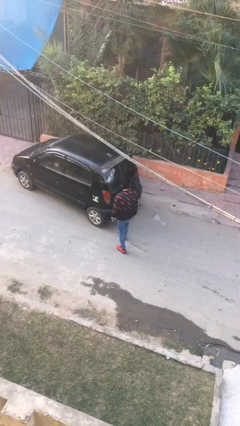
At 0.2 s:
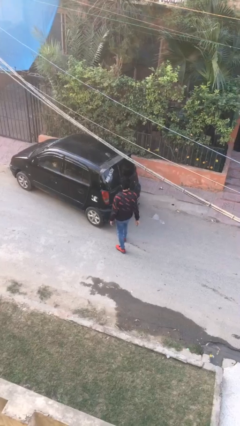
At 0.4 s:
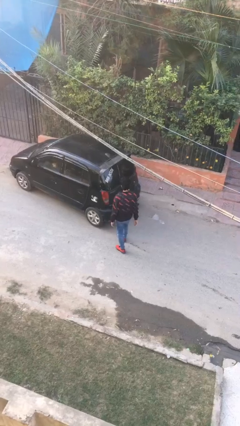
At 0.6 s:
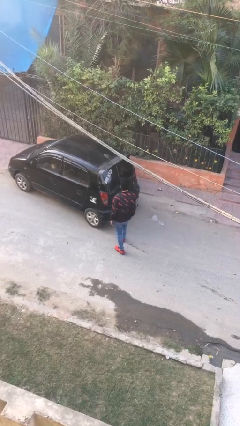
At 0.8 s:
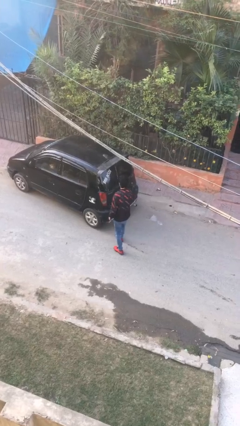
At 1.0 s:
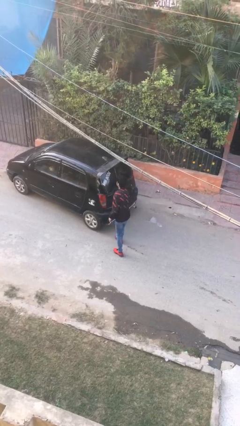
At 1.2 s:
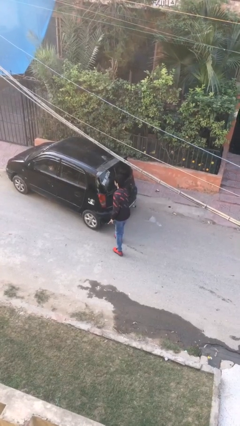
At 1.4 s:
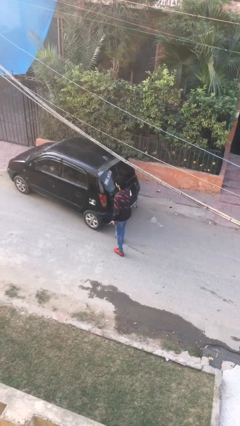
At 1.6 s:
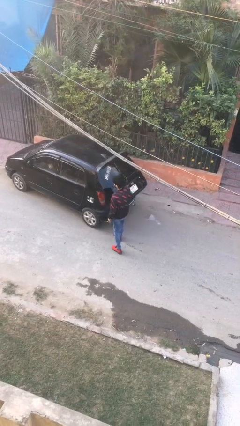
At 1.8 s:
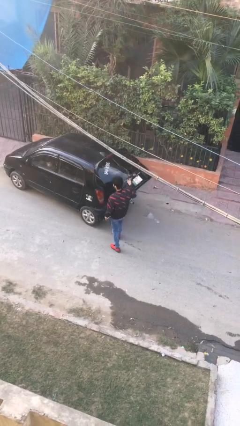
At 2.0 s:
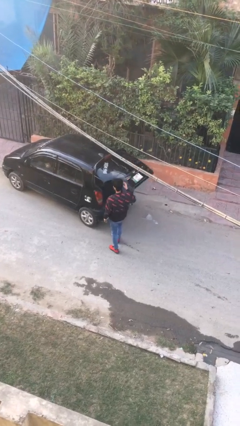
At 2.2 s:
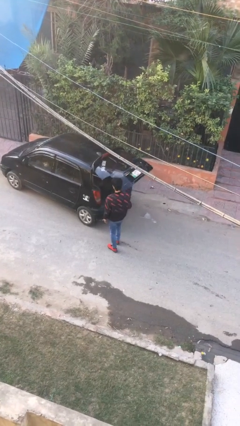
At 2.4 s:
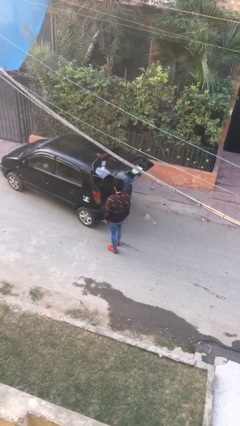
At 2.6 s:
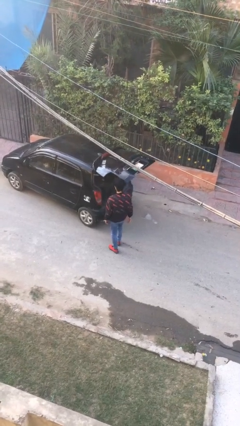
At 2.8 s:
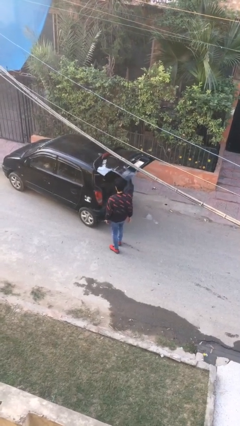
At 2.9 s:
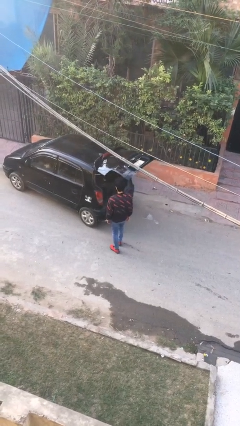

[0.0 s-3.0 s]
person opens car trunk

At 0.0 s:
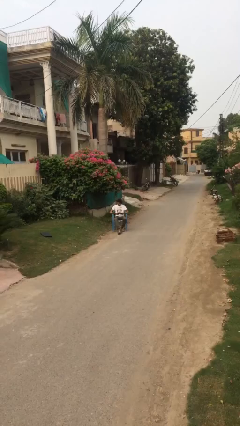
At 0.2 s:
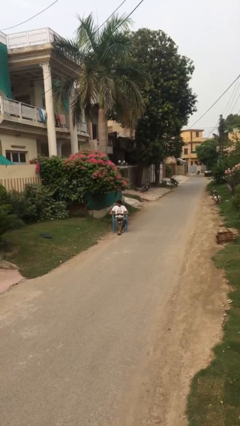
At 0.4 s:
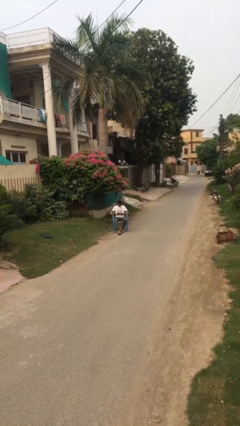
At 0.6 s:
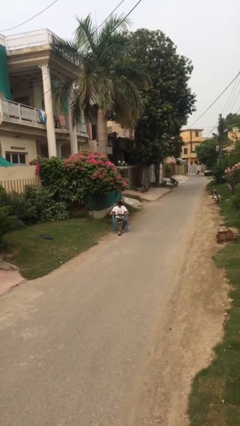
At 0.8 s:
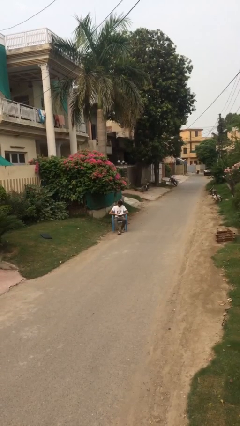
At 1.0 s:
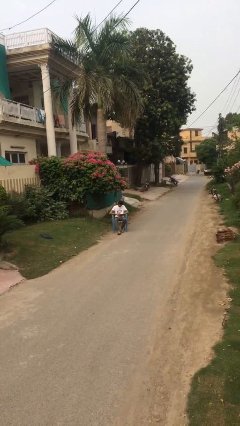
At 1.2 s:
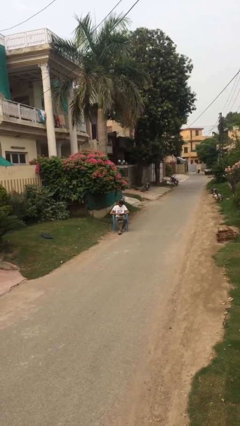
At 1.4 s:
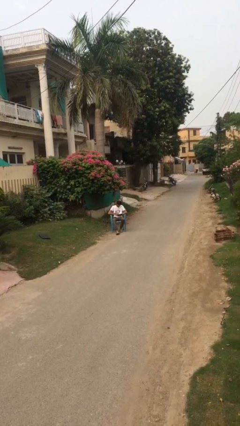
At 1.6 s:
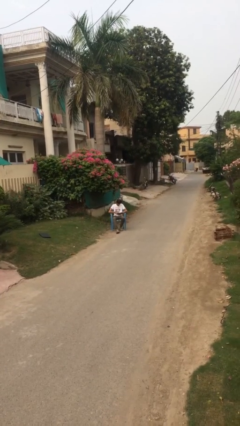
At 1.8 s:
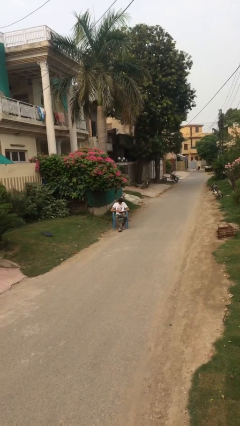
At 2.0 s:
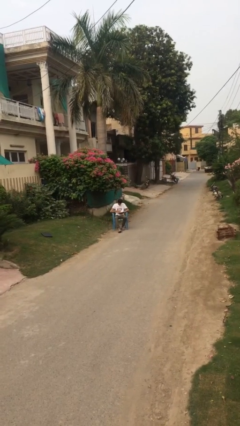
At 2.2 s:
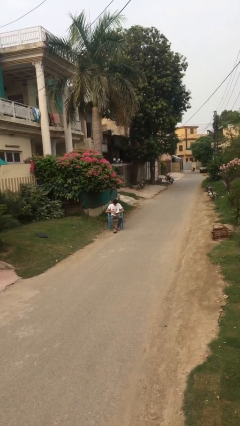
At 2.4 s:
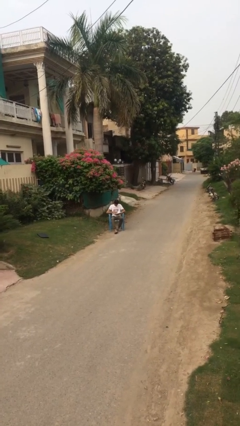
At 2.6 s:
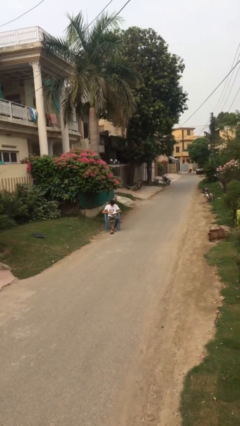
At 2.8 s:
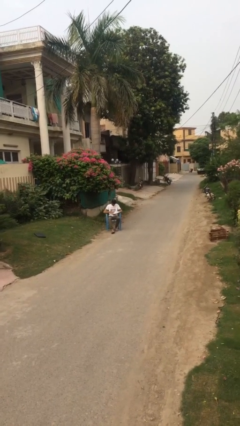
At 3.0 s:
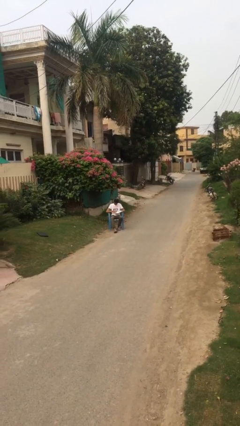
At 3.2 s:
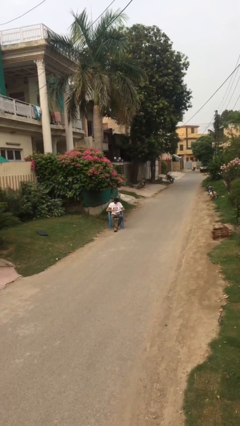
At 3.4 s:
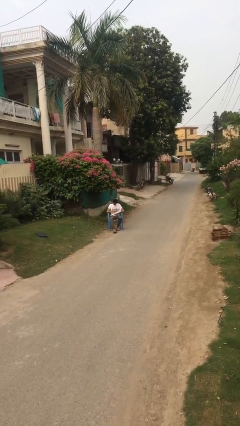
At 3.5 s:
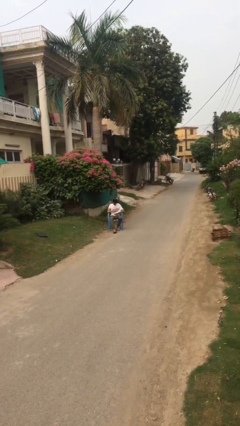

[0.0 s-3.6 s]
person reads document

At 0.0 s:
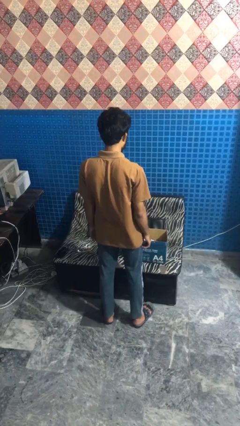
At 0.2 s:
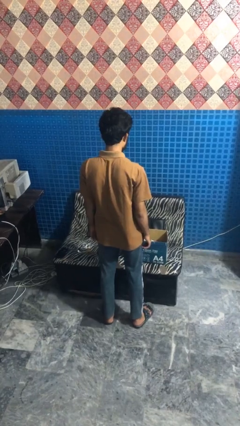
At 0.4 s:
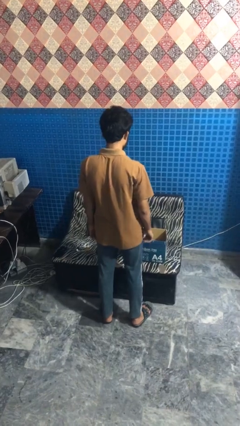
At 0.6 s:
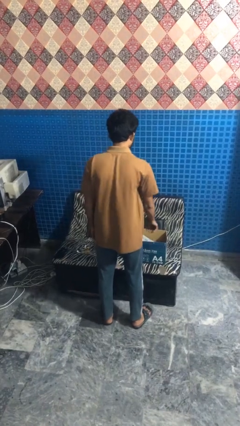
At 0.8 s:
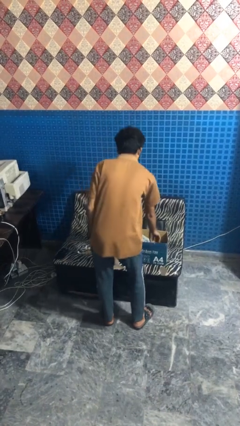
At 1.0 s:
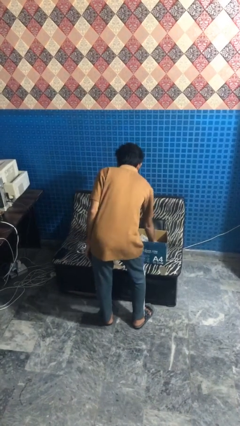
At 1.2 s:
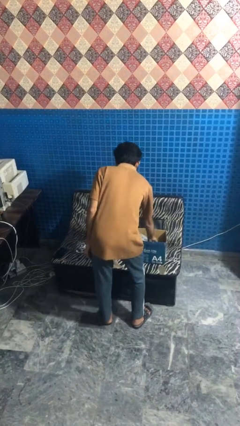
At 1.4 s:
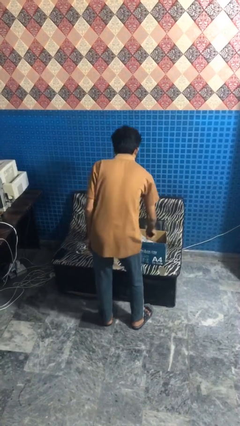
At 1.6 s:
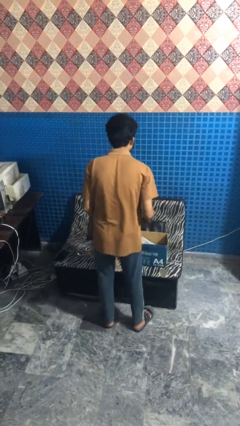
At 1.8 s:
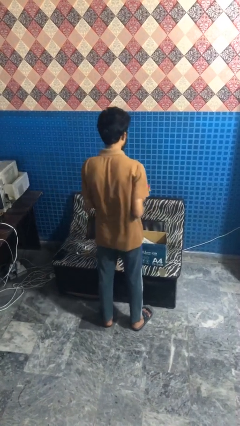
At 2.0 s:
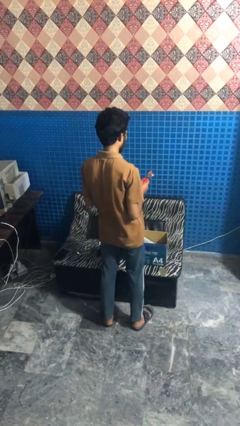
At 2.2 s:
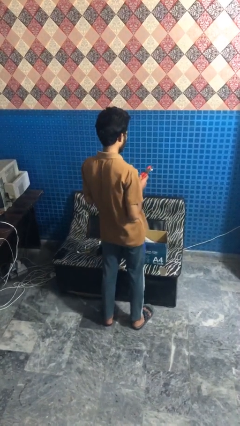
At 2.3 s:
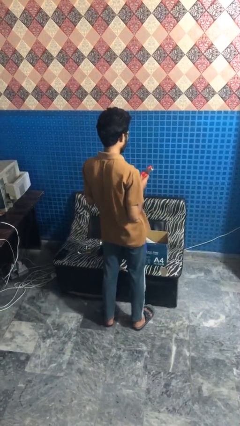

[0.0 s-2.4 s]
person takes object from box

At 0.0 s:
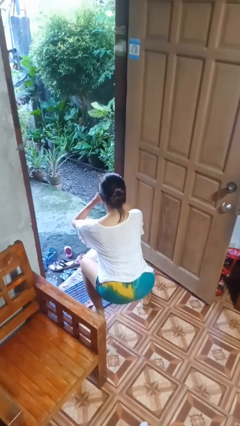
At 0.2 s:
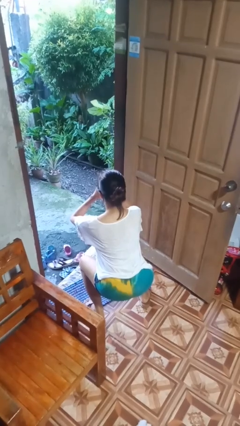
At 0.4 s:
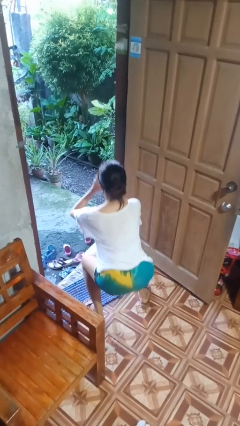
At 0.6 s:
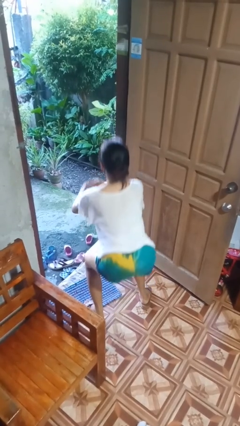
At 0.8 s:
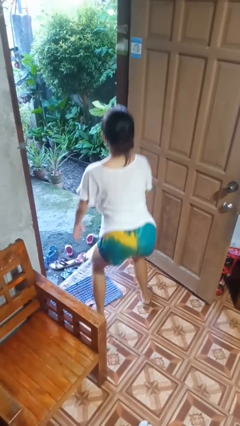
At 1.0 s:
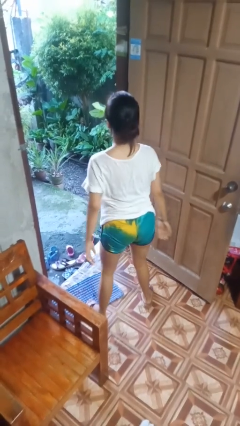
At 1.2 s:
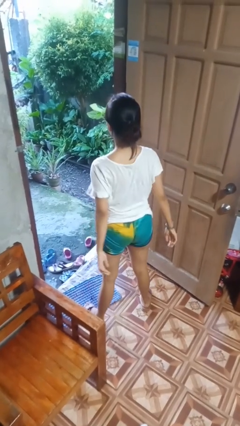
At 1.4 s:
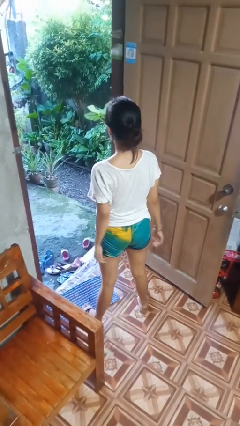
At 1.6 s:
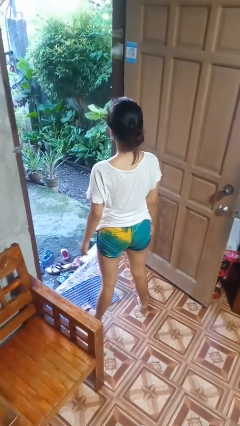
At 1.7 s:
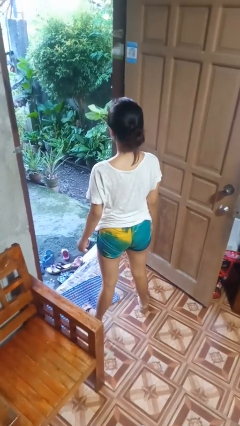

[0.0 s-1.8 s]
person stands up

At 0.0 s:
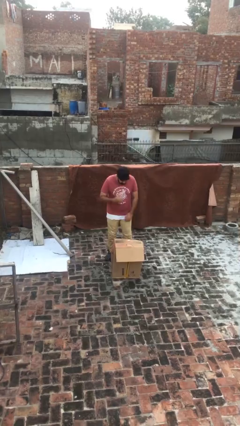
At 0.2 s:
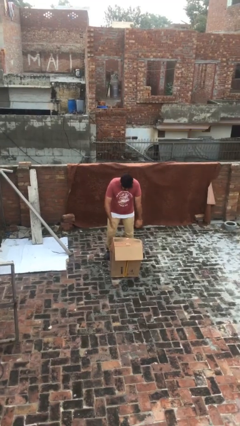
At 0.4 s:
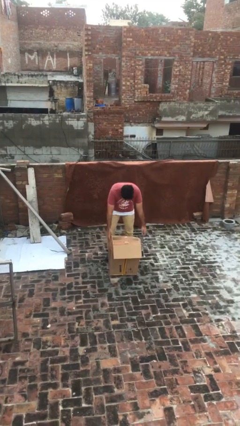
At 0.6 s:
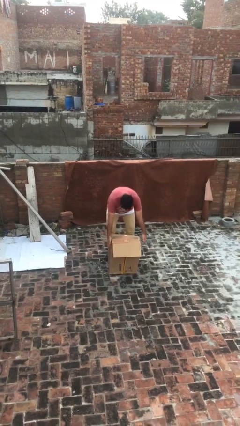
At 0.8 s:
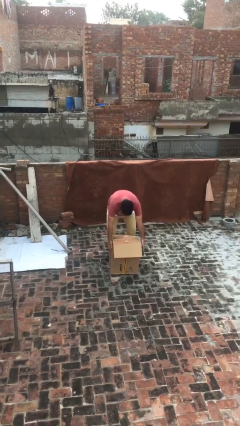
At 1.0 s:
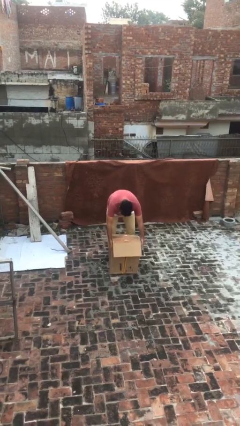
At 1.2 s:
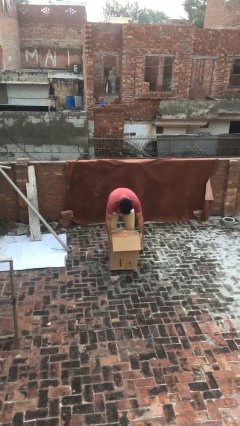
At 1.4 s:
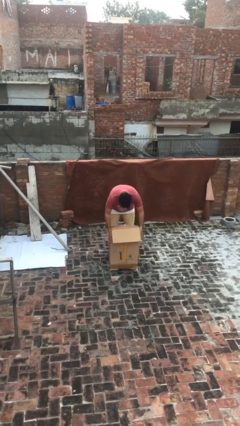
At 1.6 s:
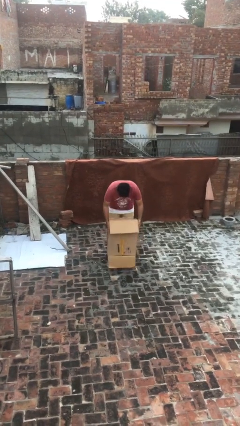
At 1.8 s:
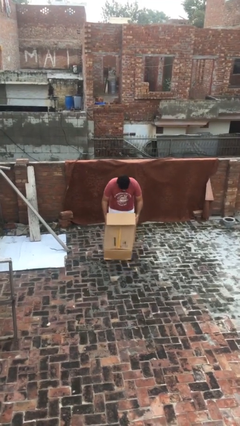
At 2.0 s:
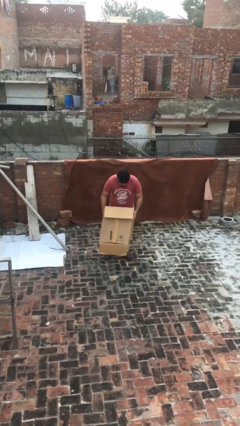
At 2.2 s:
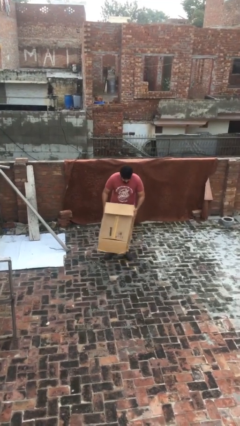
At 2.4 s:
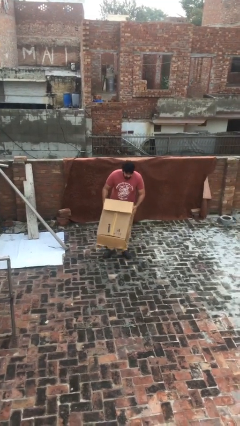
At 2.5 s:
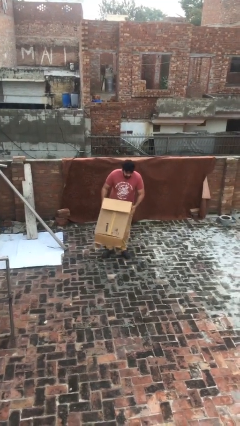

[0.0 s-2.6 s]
person picks up object from floor

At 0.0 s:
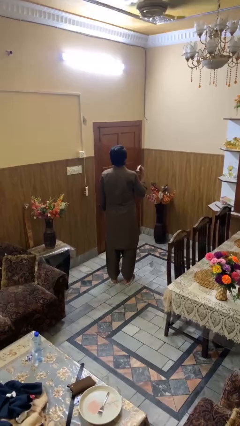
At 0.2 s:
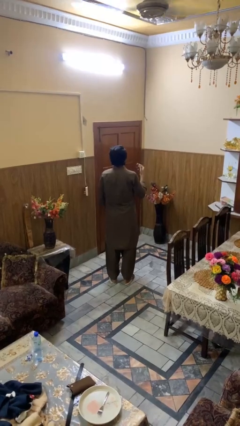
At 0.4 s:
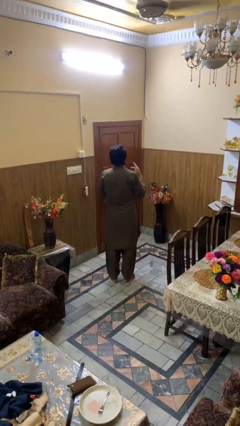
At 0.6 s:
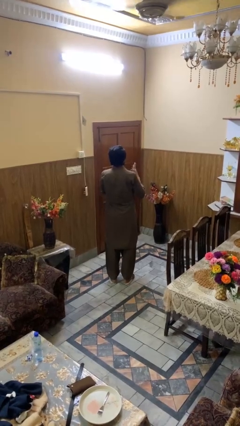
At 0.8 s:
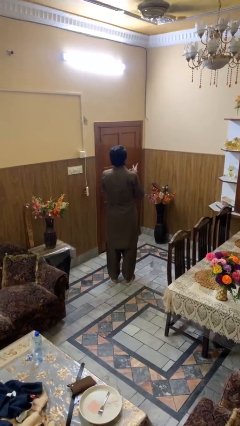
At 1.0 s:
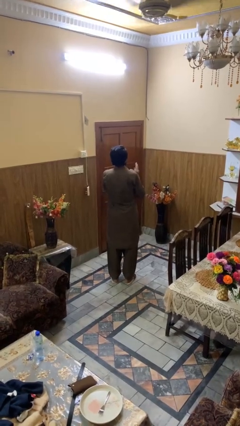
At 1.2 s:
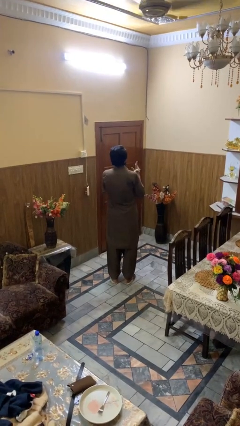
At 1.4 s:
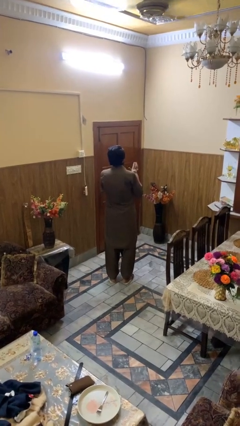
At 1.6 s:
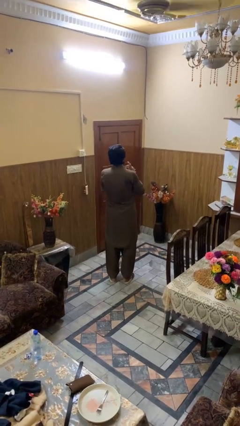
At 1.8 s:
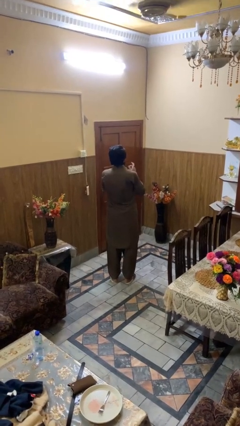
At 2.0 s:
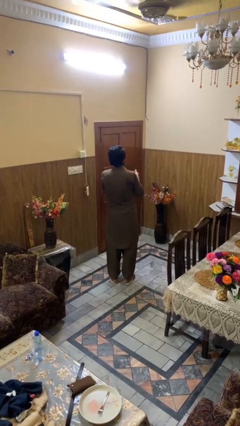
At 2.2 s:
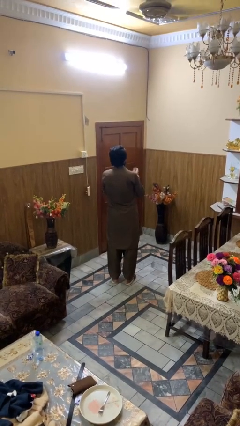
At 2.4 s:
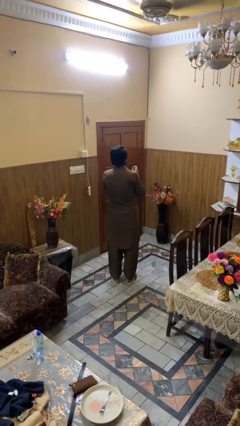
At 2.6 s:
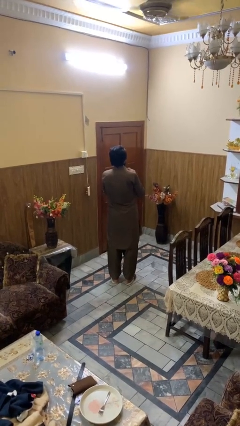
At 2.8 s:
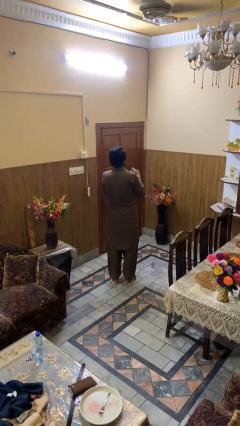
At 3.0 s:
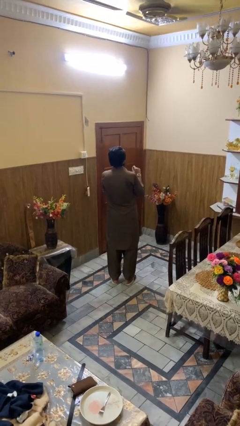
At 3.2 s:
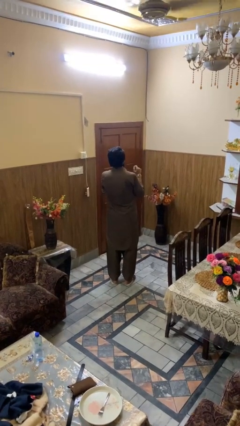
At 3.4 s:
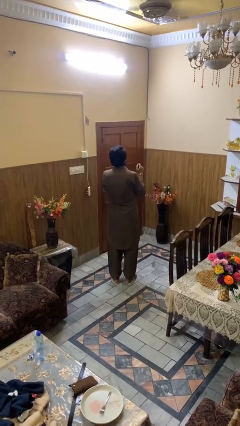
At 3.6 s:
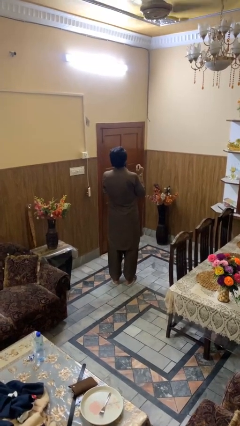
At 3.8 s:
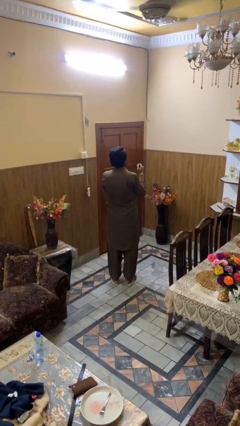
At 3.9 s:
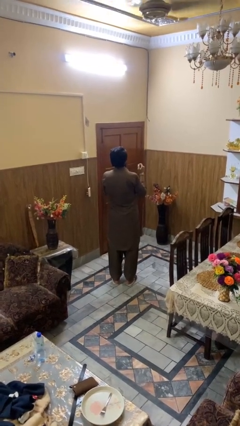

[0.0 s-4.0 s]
person puts on wristwatch
